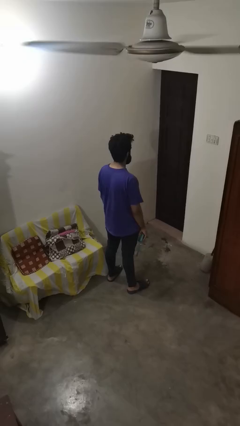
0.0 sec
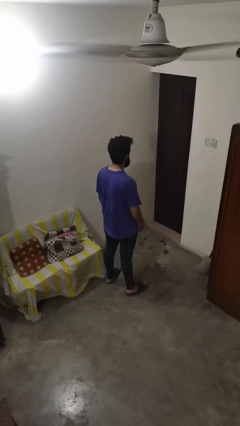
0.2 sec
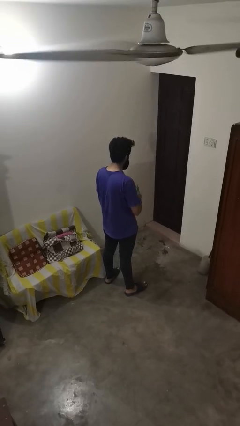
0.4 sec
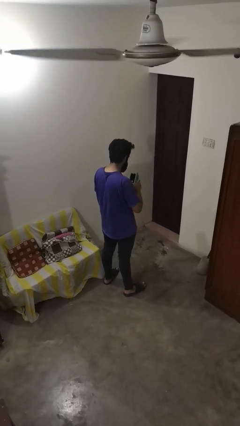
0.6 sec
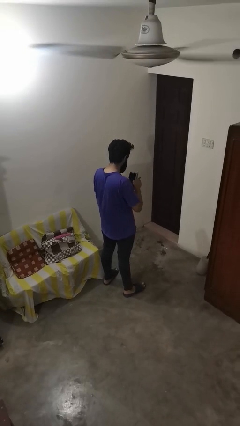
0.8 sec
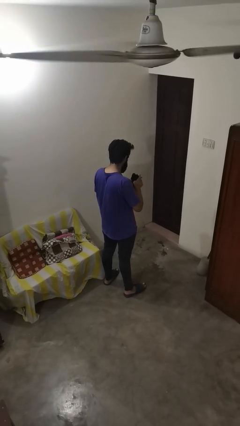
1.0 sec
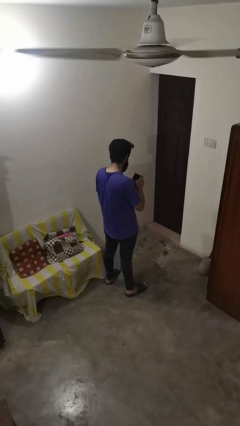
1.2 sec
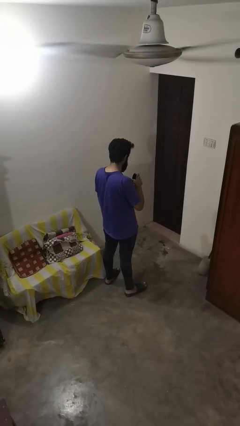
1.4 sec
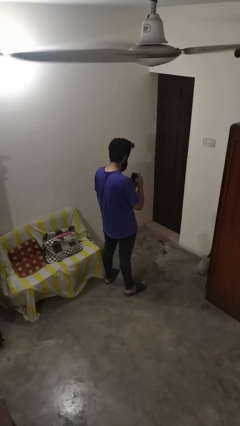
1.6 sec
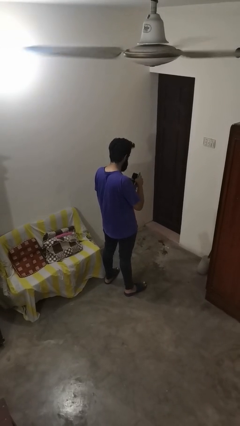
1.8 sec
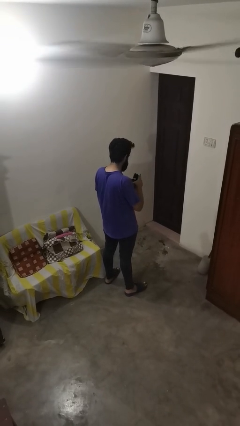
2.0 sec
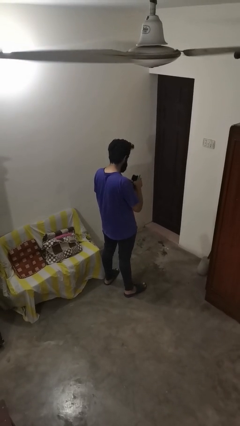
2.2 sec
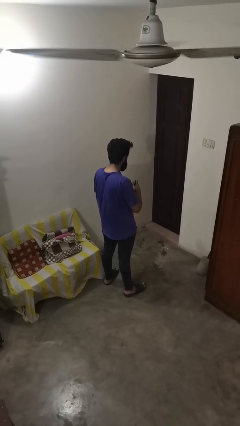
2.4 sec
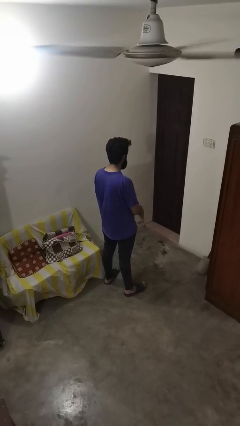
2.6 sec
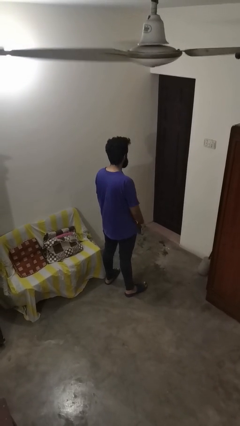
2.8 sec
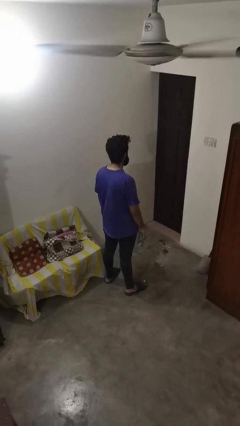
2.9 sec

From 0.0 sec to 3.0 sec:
person searches in bag

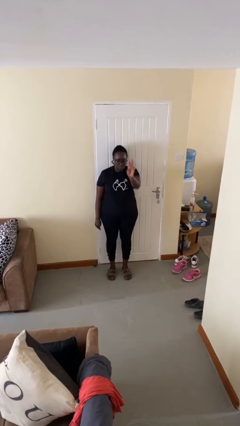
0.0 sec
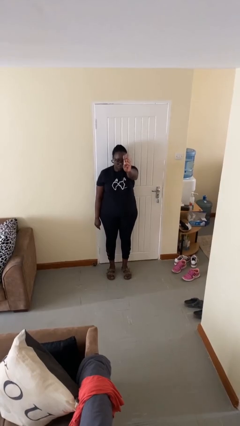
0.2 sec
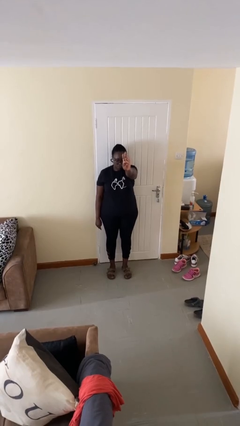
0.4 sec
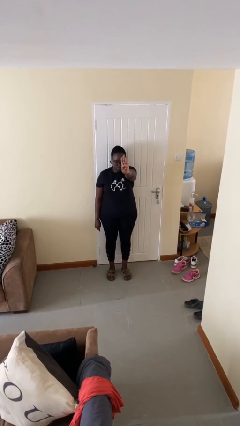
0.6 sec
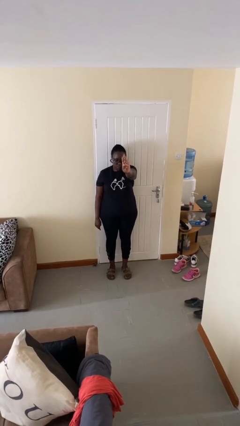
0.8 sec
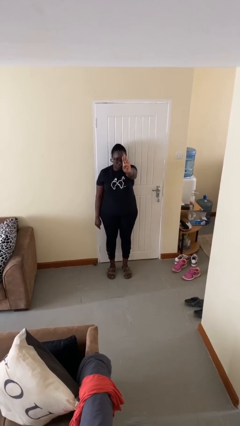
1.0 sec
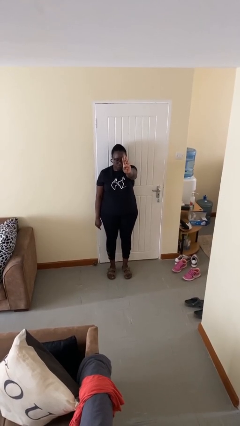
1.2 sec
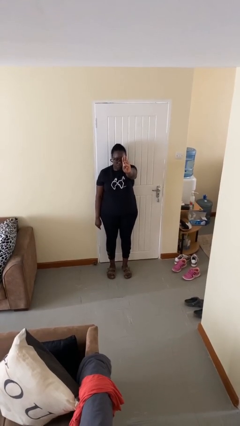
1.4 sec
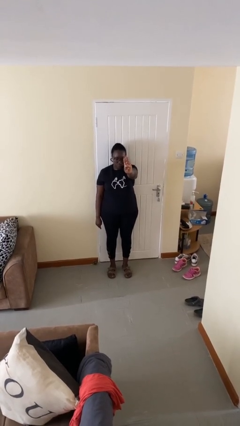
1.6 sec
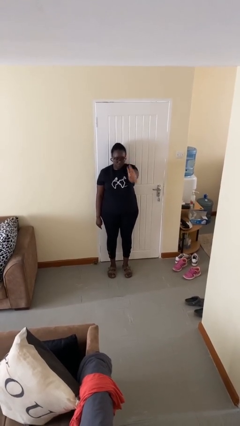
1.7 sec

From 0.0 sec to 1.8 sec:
person gestures number four

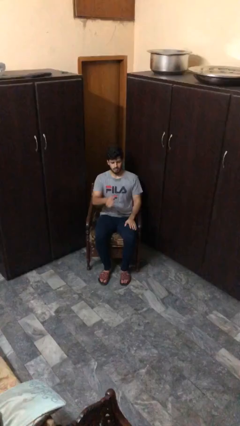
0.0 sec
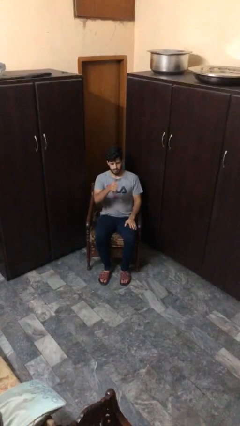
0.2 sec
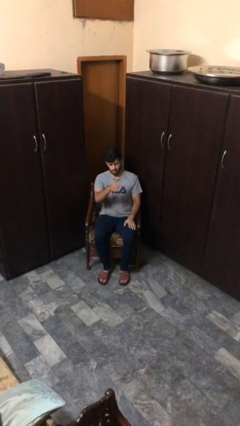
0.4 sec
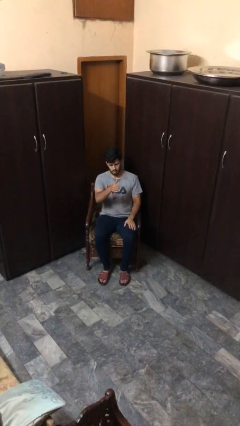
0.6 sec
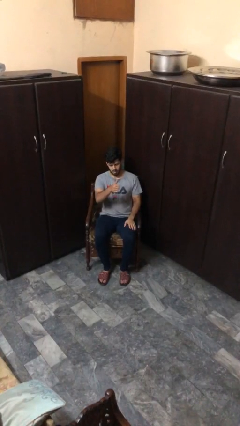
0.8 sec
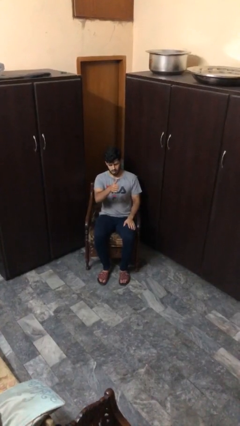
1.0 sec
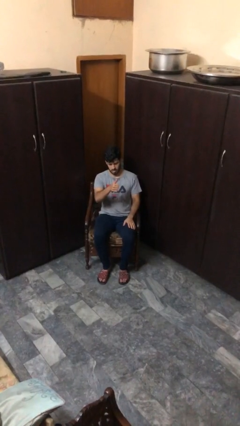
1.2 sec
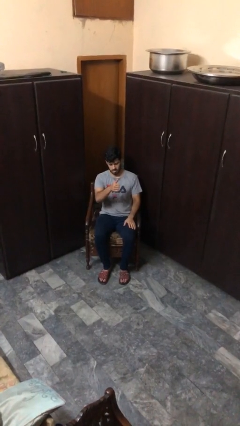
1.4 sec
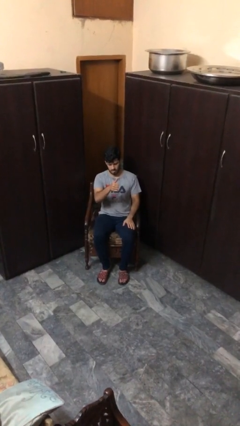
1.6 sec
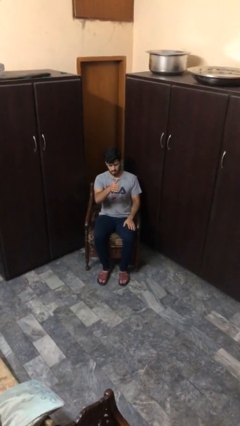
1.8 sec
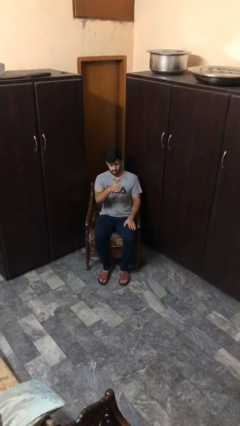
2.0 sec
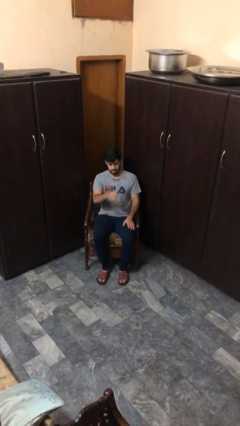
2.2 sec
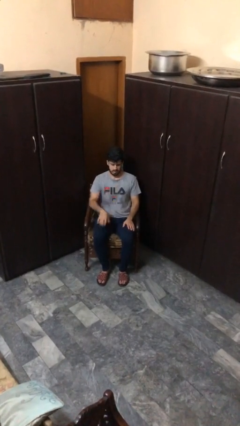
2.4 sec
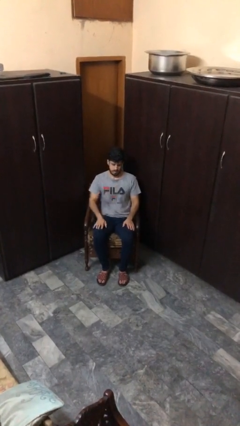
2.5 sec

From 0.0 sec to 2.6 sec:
person gestures thumbs up

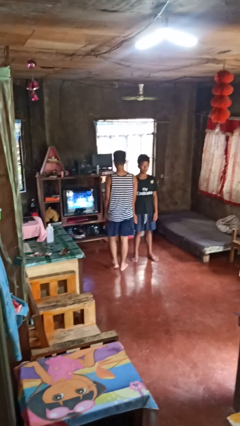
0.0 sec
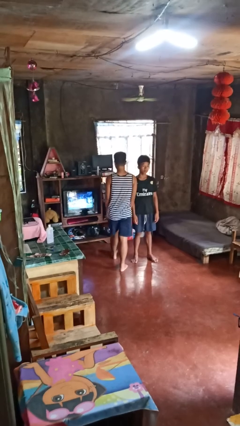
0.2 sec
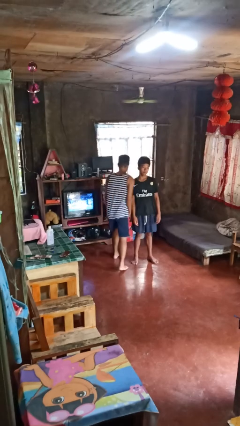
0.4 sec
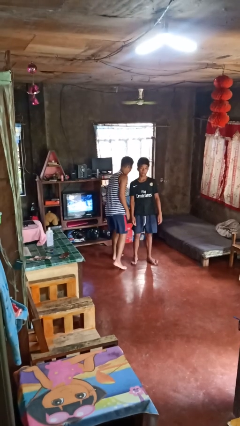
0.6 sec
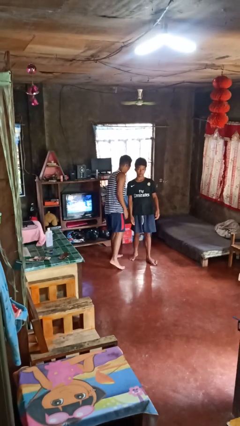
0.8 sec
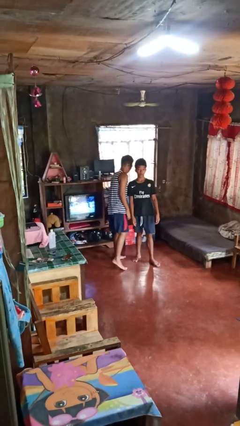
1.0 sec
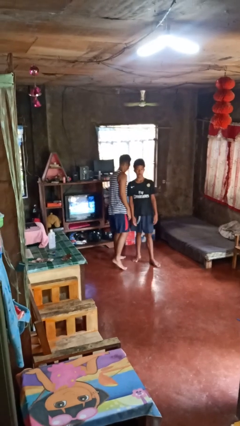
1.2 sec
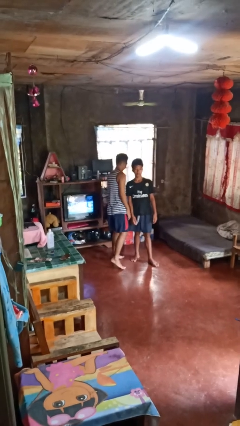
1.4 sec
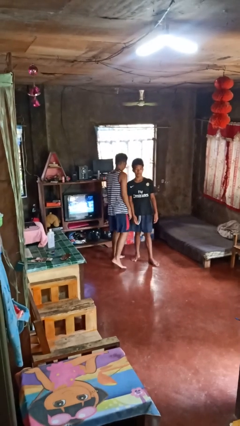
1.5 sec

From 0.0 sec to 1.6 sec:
person bumps into person

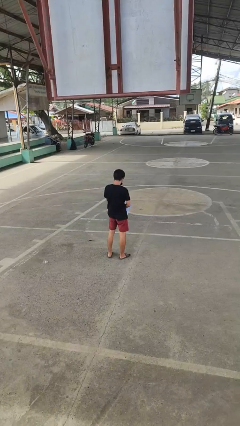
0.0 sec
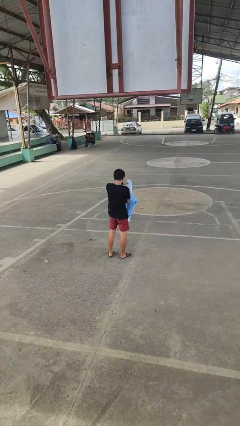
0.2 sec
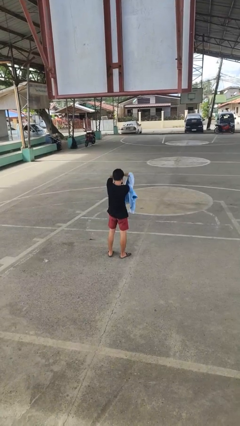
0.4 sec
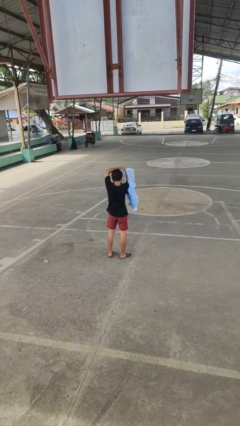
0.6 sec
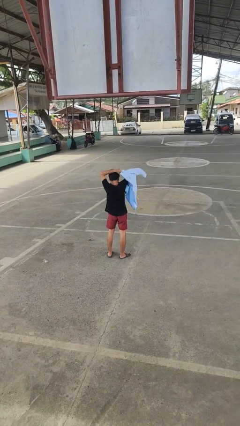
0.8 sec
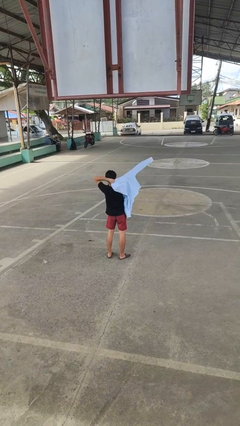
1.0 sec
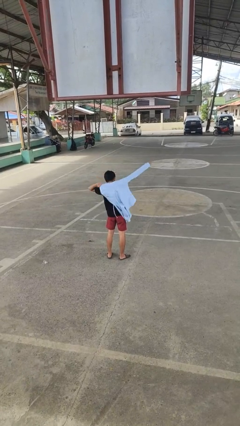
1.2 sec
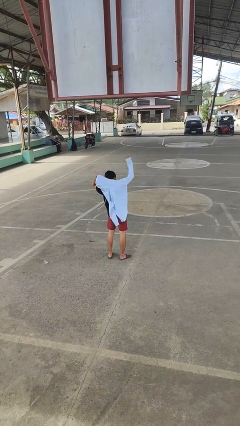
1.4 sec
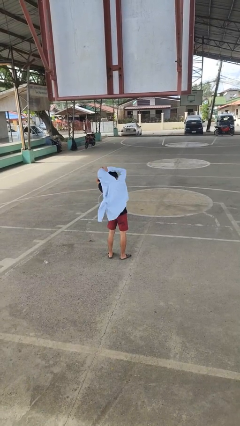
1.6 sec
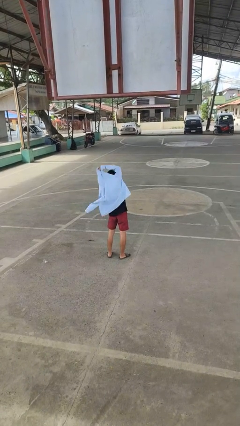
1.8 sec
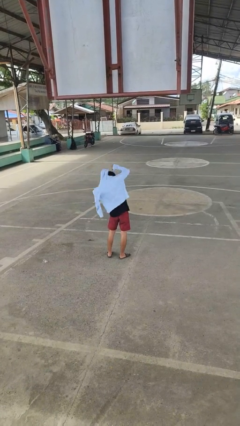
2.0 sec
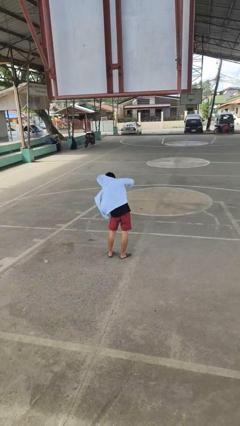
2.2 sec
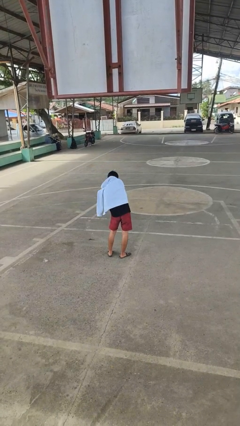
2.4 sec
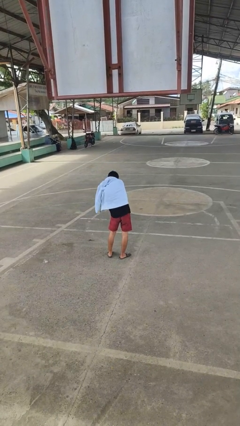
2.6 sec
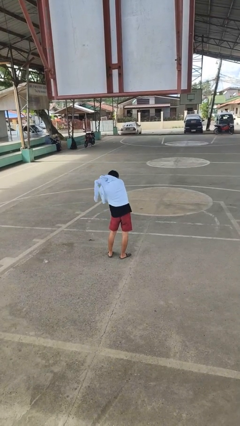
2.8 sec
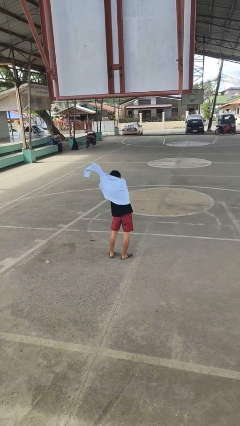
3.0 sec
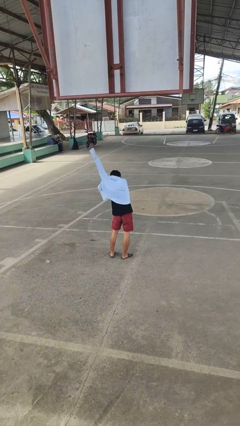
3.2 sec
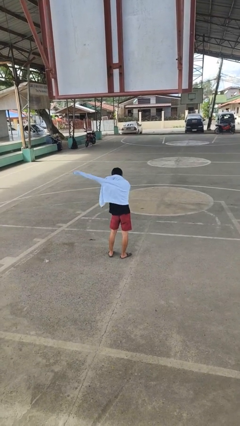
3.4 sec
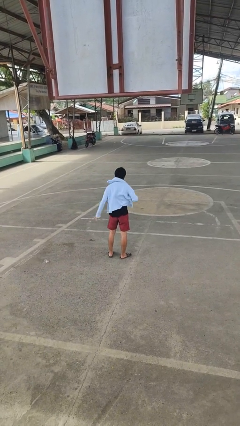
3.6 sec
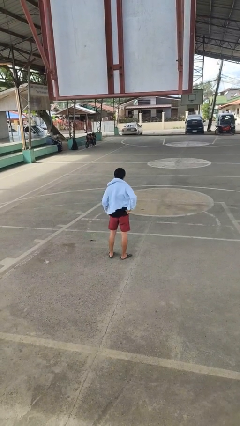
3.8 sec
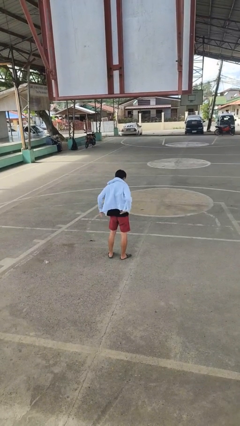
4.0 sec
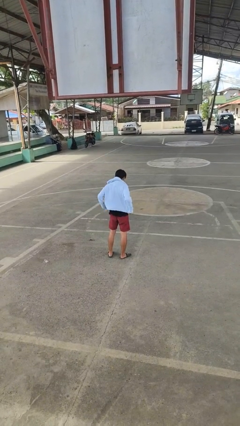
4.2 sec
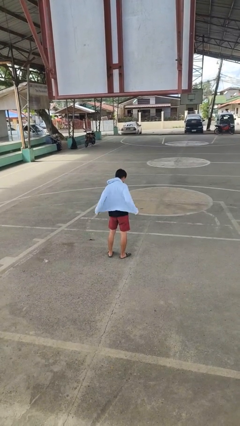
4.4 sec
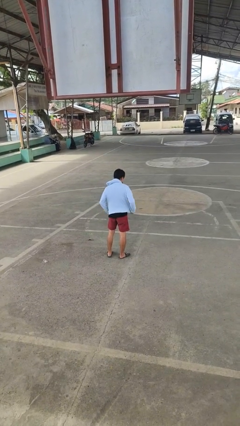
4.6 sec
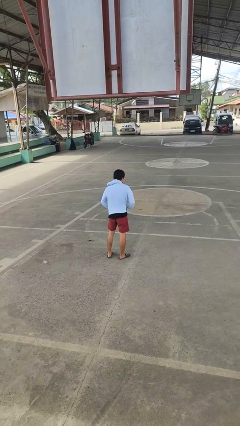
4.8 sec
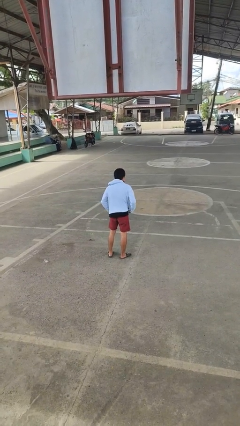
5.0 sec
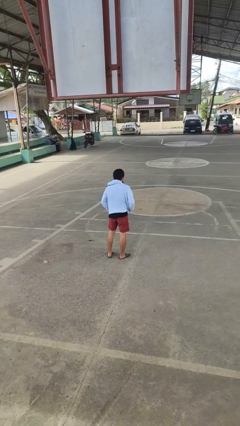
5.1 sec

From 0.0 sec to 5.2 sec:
person puts on jacket

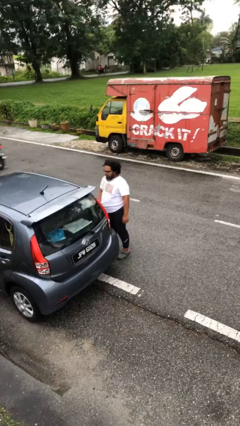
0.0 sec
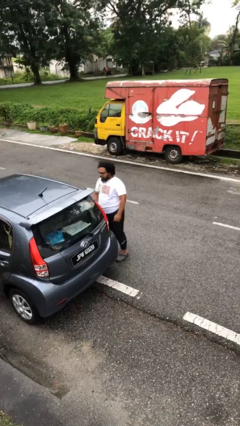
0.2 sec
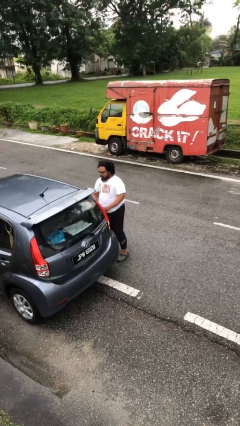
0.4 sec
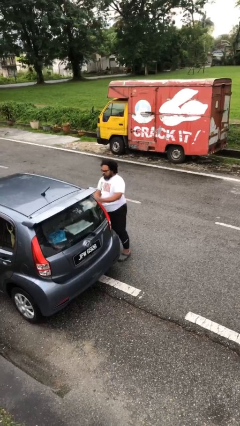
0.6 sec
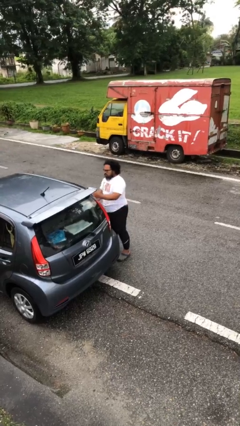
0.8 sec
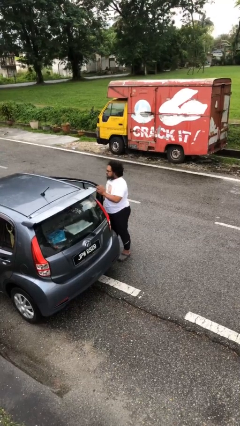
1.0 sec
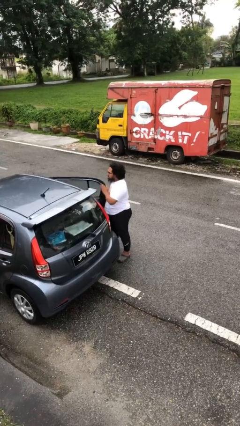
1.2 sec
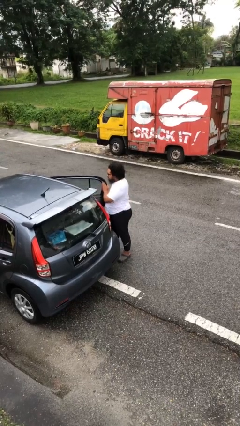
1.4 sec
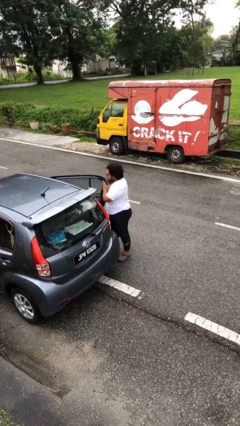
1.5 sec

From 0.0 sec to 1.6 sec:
person opens car door

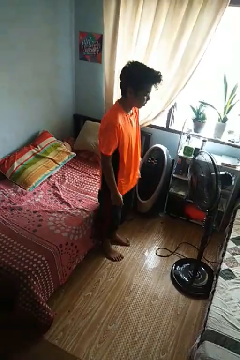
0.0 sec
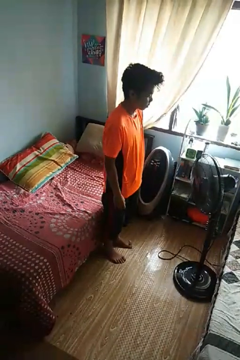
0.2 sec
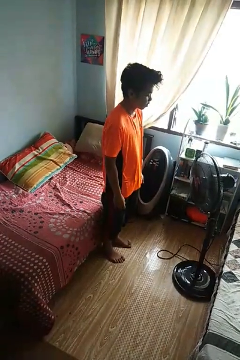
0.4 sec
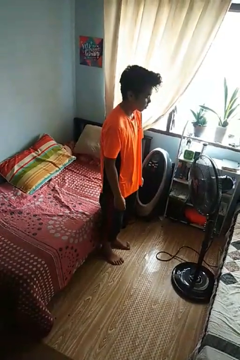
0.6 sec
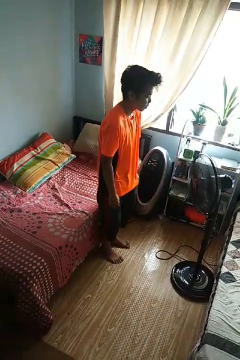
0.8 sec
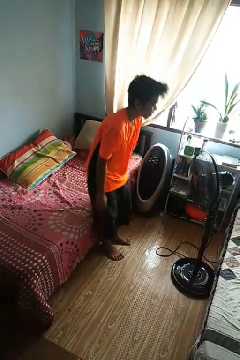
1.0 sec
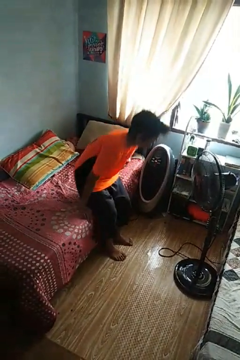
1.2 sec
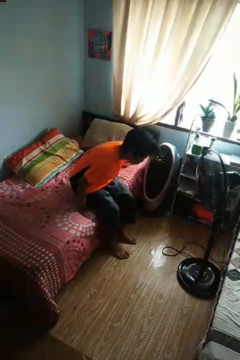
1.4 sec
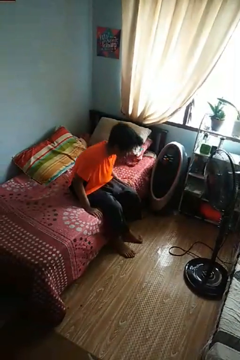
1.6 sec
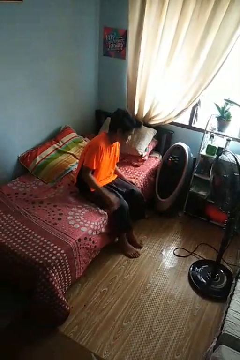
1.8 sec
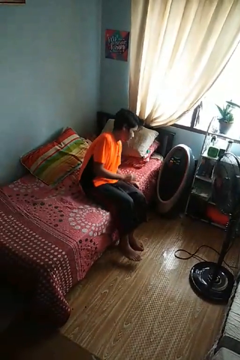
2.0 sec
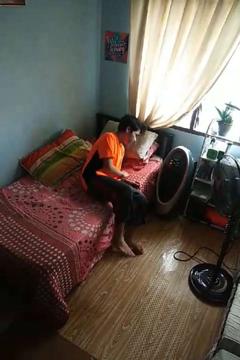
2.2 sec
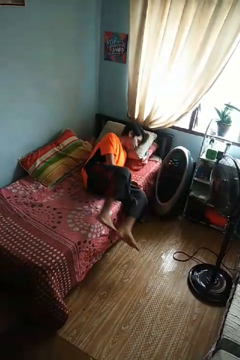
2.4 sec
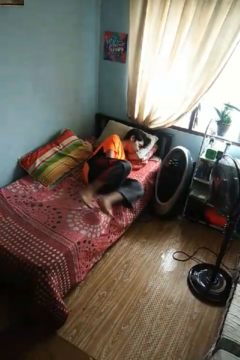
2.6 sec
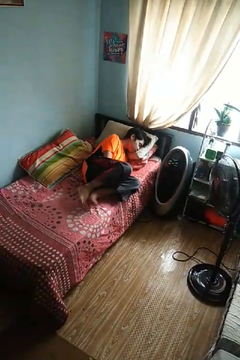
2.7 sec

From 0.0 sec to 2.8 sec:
person lies down on bed
